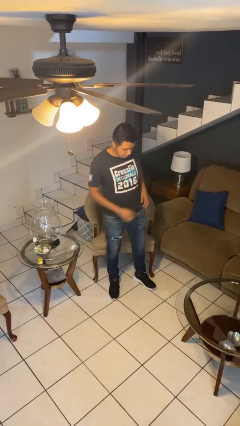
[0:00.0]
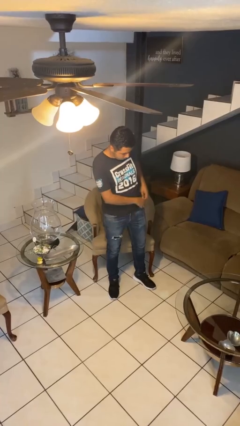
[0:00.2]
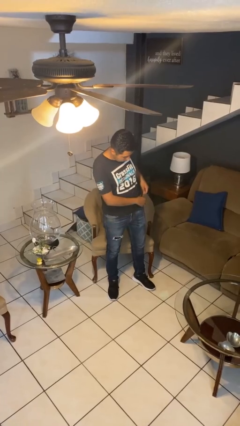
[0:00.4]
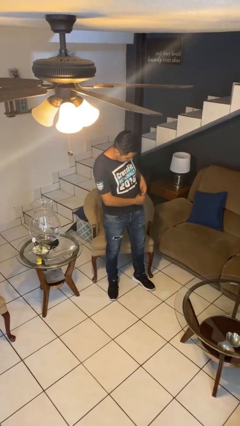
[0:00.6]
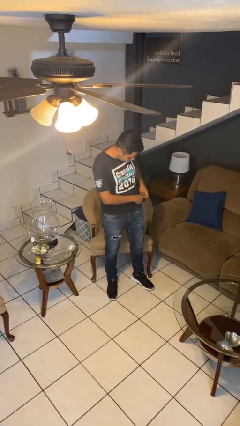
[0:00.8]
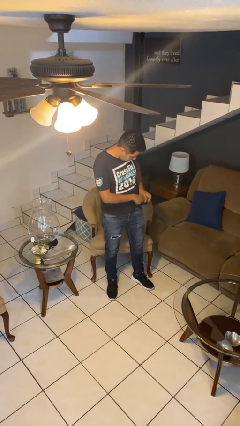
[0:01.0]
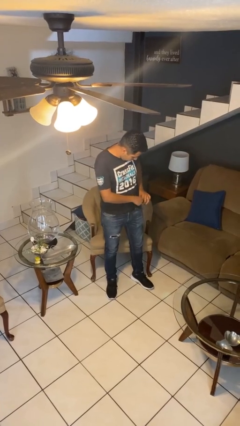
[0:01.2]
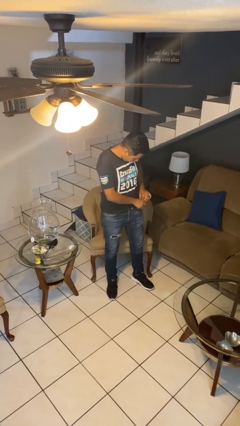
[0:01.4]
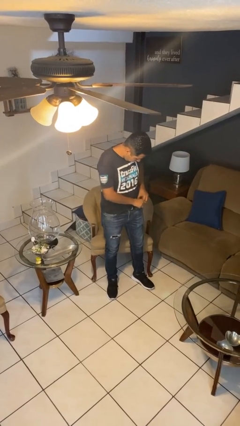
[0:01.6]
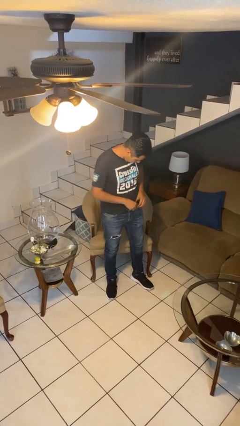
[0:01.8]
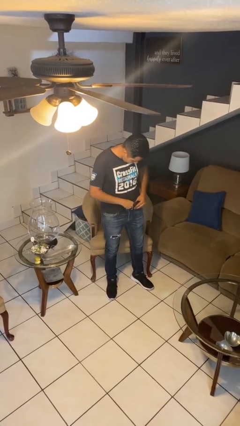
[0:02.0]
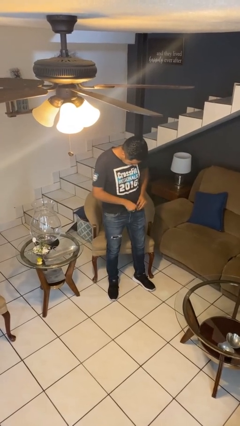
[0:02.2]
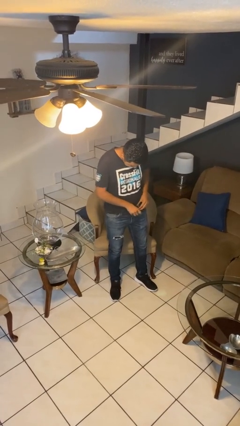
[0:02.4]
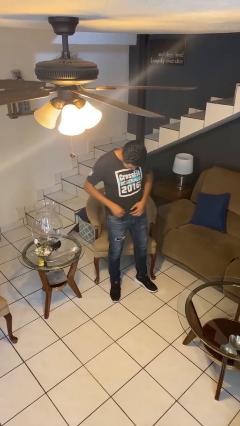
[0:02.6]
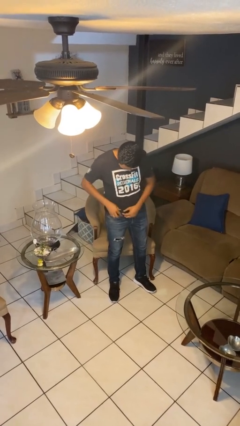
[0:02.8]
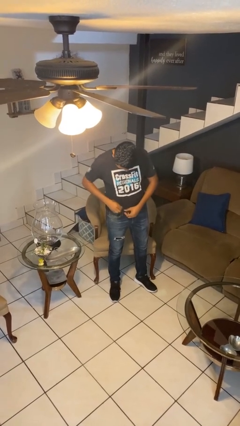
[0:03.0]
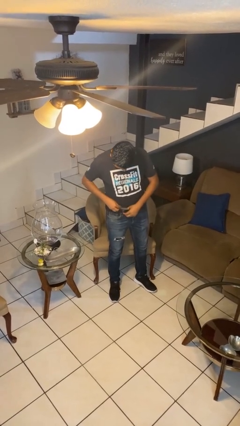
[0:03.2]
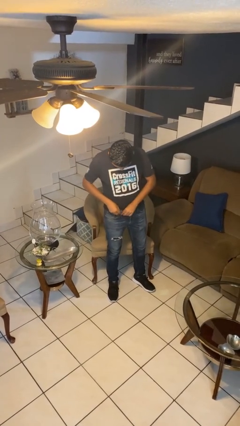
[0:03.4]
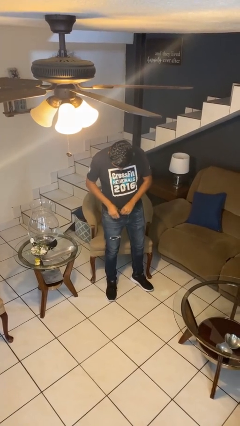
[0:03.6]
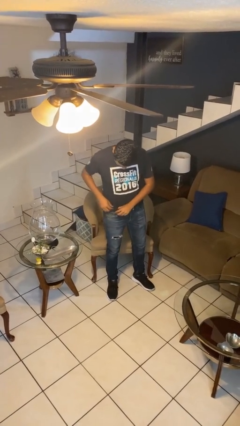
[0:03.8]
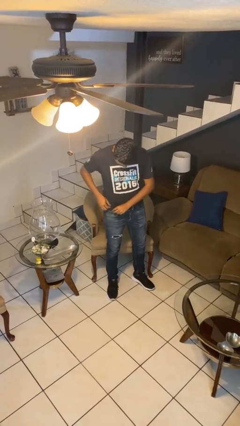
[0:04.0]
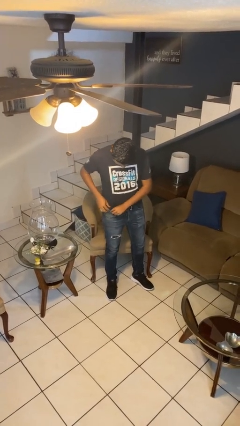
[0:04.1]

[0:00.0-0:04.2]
person tucks in shirt

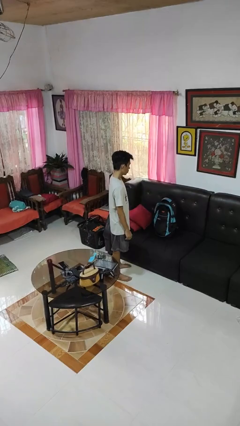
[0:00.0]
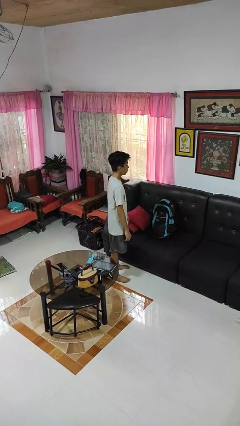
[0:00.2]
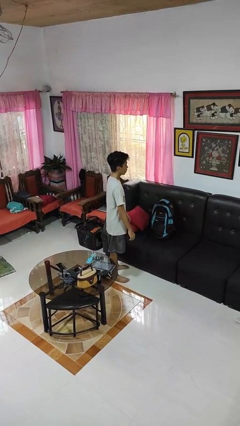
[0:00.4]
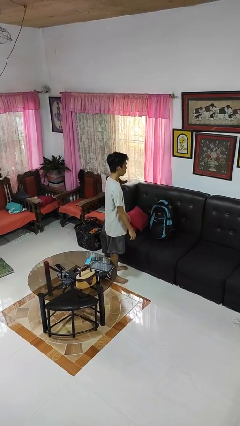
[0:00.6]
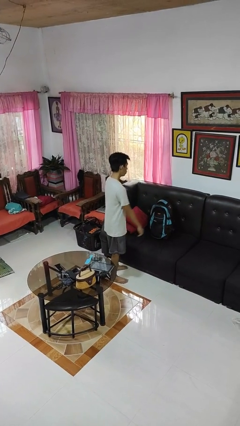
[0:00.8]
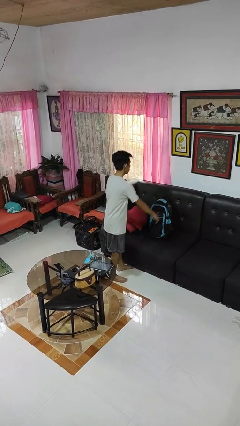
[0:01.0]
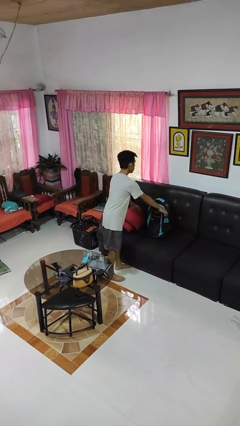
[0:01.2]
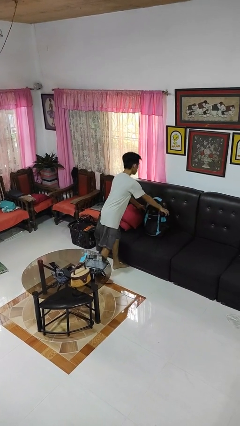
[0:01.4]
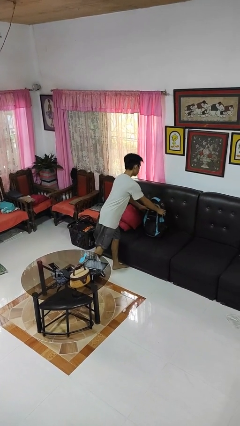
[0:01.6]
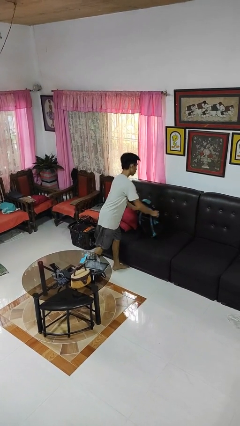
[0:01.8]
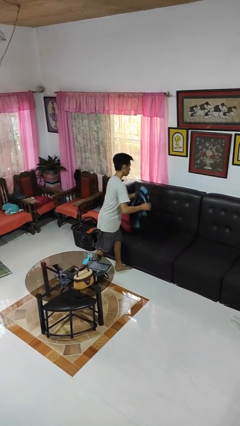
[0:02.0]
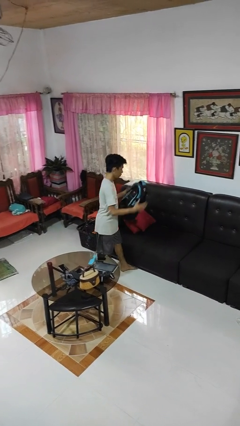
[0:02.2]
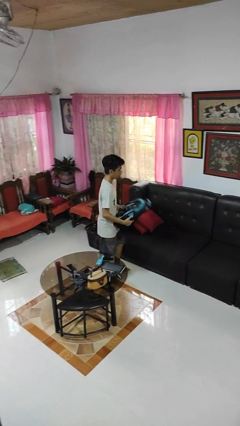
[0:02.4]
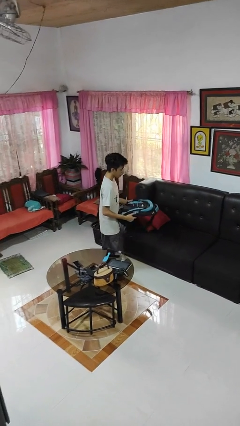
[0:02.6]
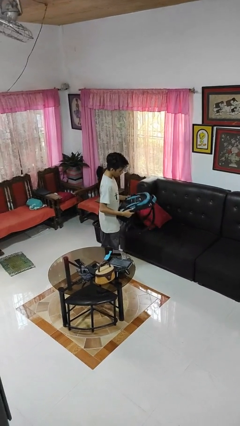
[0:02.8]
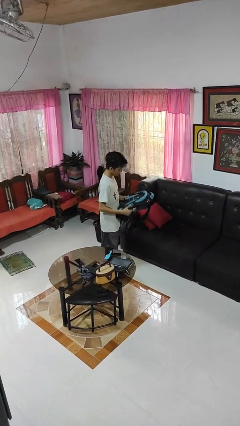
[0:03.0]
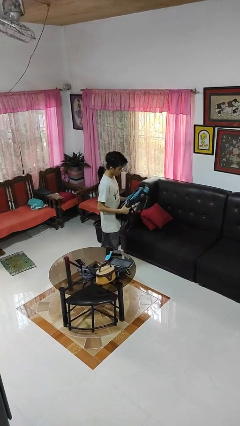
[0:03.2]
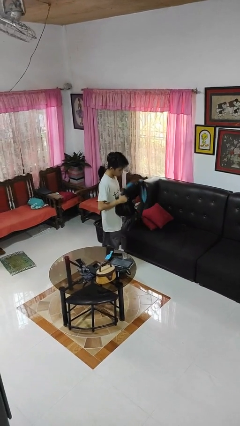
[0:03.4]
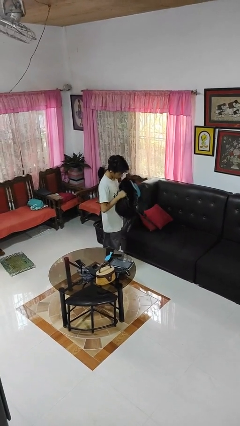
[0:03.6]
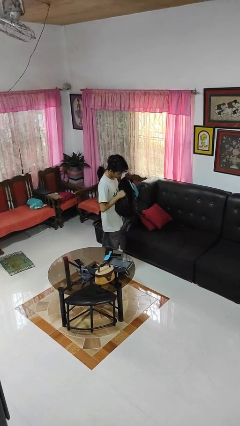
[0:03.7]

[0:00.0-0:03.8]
person picks up object from couch

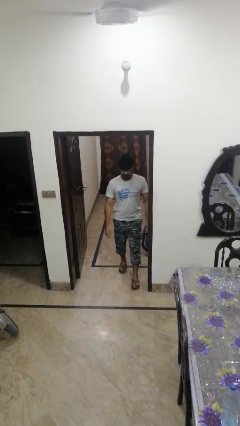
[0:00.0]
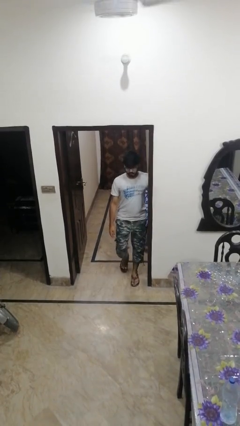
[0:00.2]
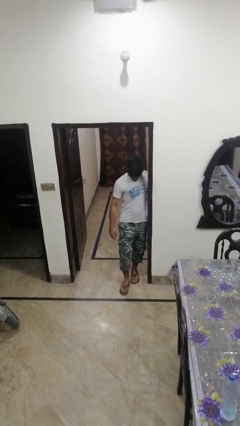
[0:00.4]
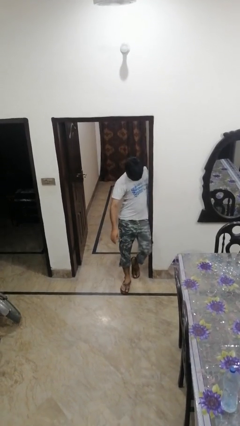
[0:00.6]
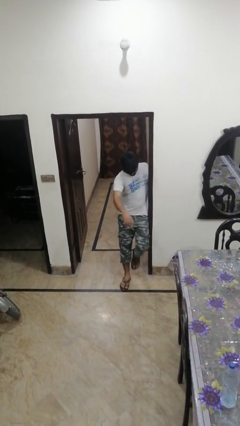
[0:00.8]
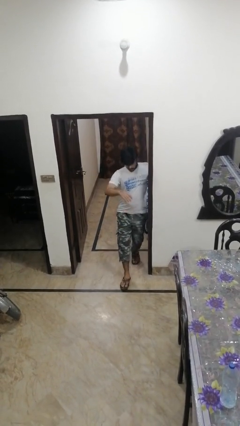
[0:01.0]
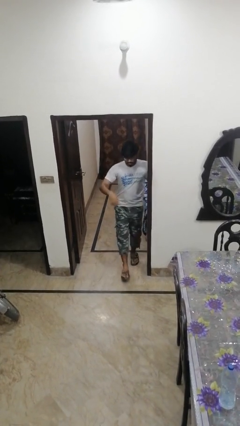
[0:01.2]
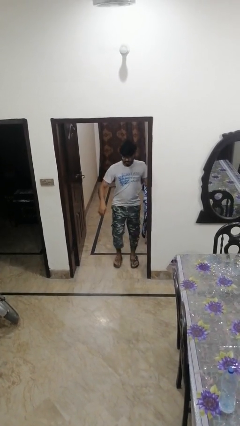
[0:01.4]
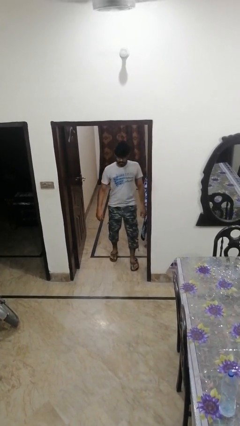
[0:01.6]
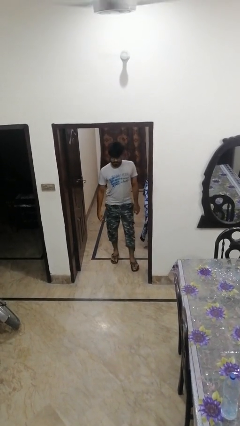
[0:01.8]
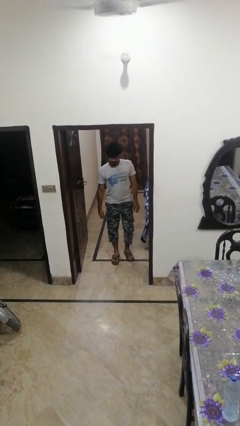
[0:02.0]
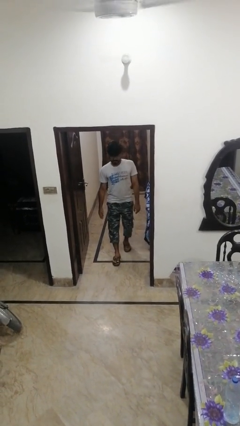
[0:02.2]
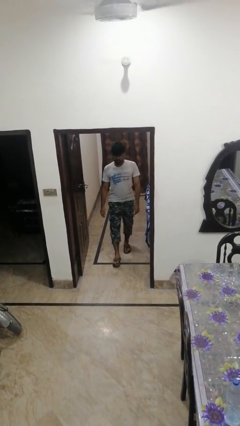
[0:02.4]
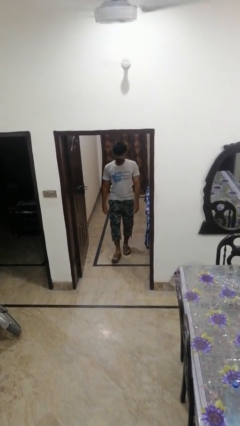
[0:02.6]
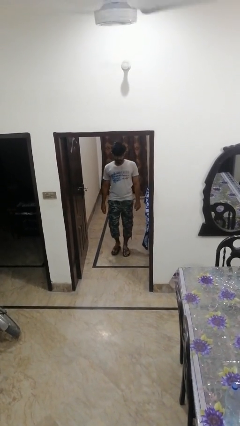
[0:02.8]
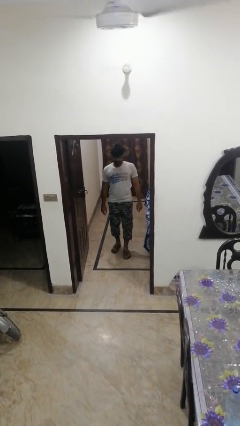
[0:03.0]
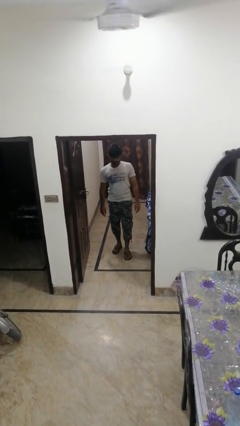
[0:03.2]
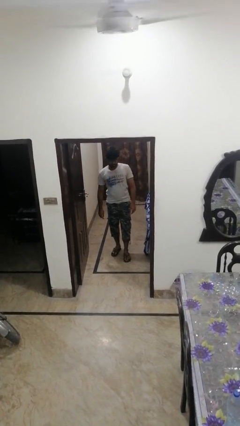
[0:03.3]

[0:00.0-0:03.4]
person bumps into wall

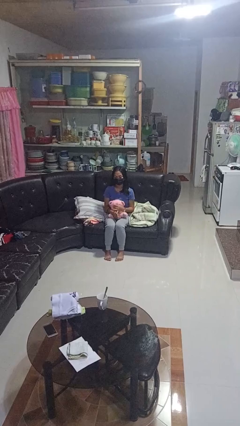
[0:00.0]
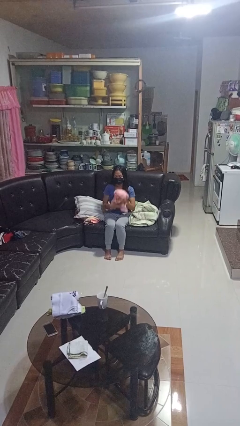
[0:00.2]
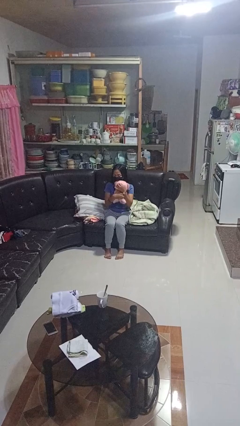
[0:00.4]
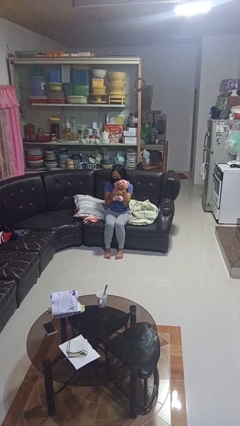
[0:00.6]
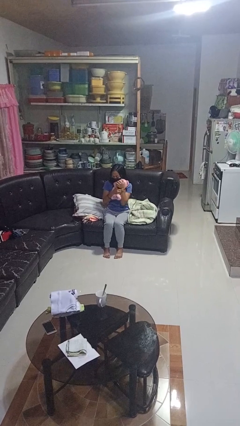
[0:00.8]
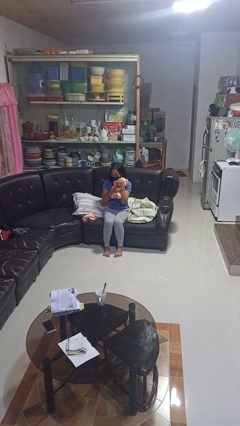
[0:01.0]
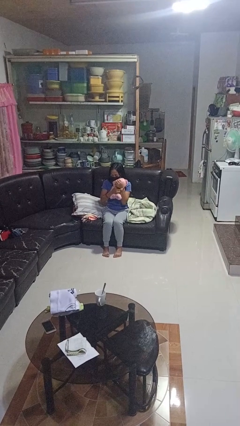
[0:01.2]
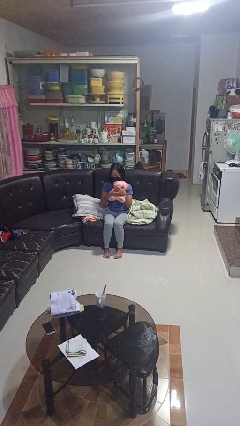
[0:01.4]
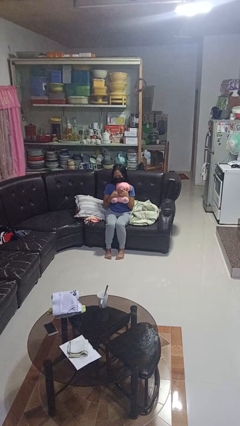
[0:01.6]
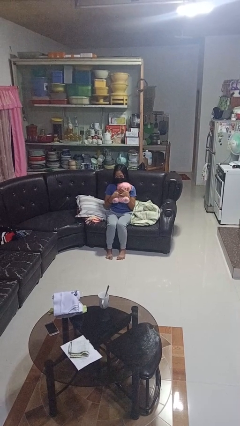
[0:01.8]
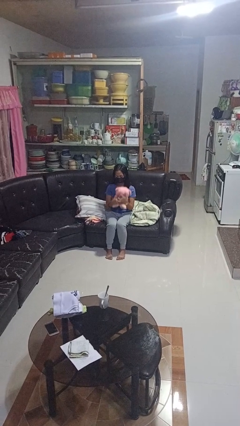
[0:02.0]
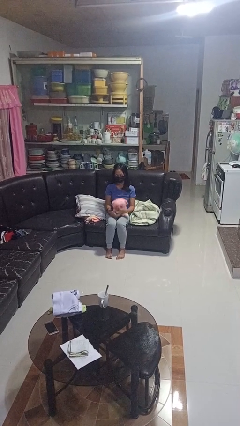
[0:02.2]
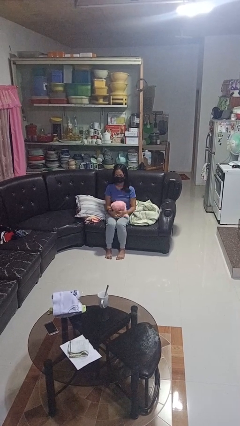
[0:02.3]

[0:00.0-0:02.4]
person hugs stuffed animal

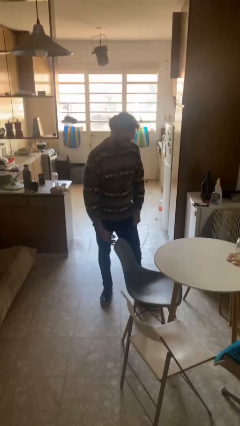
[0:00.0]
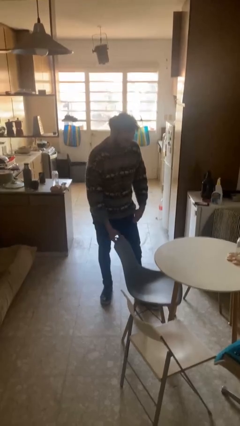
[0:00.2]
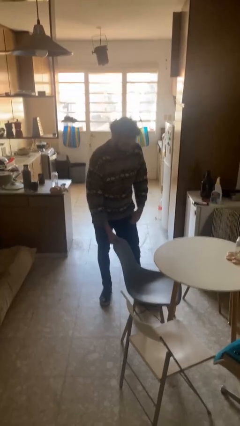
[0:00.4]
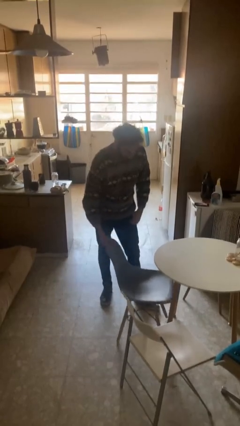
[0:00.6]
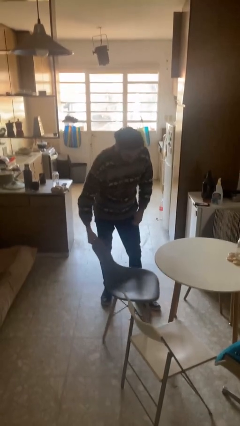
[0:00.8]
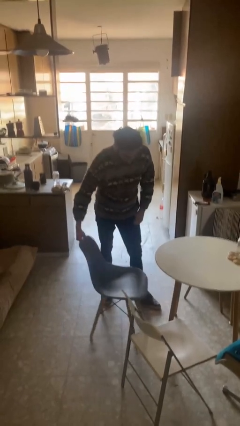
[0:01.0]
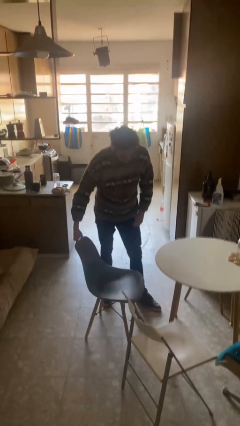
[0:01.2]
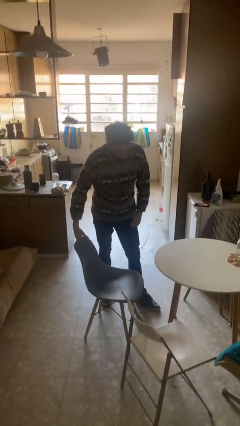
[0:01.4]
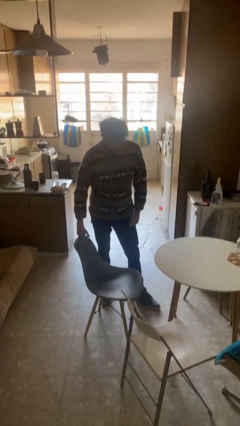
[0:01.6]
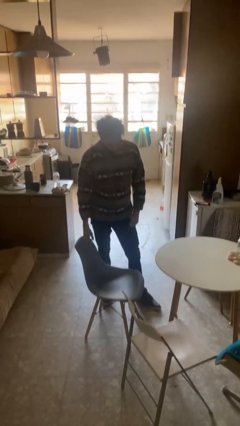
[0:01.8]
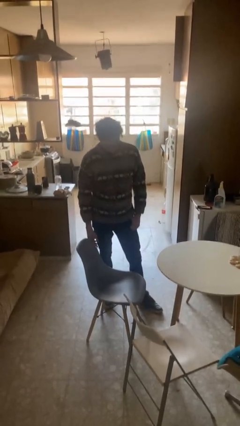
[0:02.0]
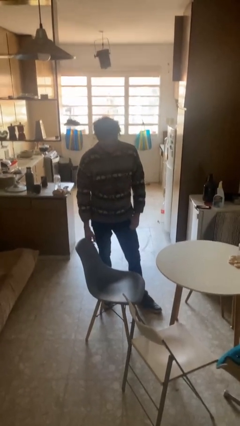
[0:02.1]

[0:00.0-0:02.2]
person pulls out chair

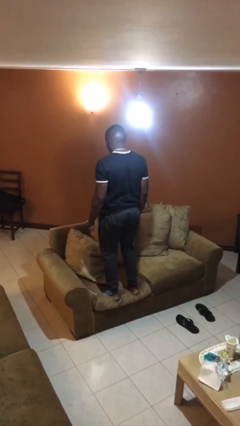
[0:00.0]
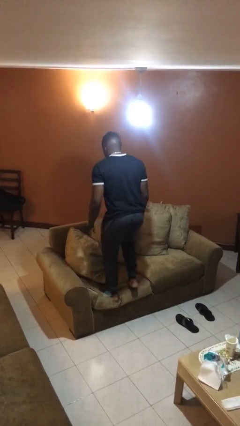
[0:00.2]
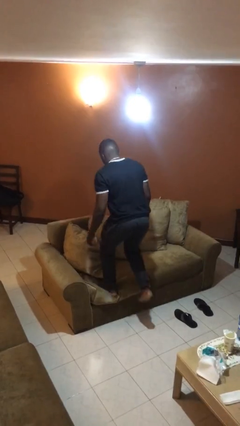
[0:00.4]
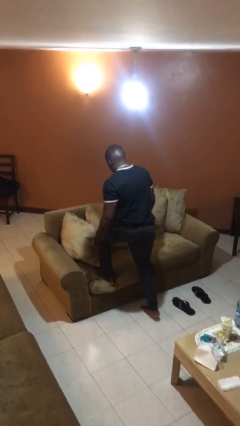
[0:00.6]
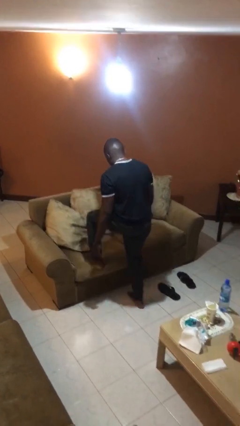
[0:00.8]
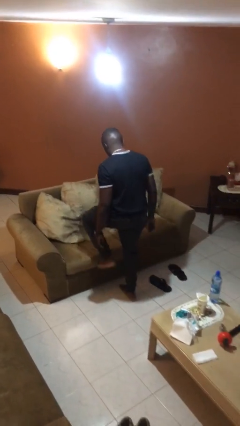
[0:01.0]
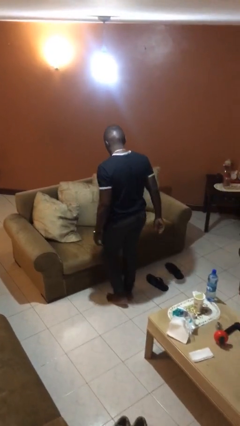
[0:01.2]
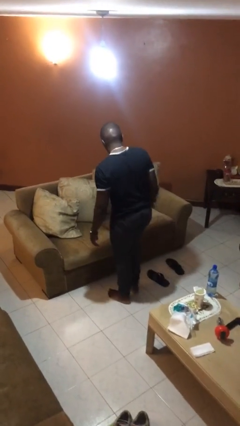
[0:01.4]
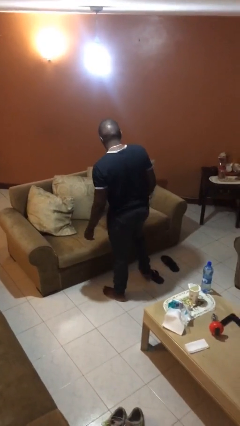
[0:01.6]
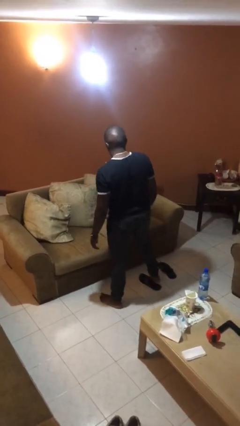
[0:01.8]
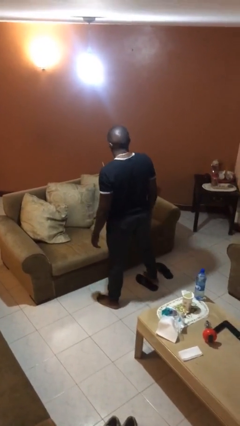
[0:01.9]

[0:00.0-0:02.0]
person climbs off chair
